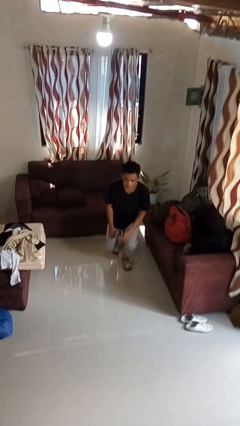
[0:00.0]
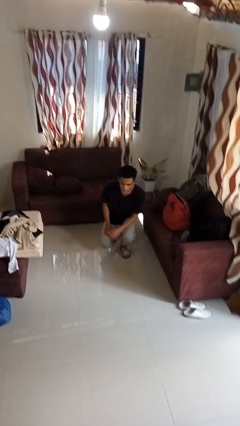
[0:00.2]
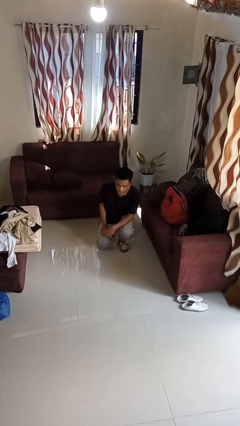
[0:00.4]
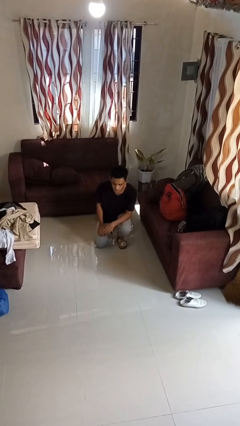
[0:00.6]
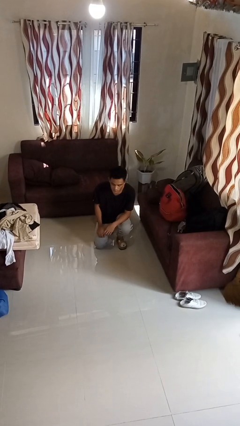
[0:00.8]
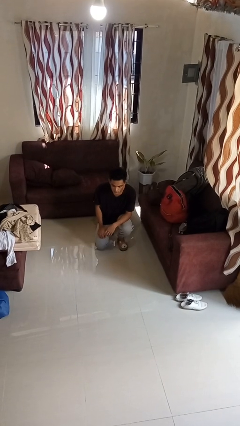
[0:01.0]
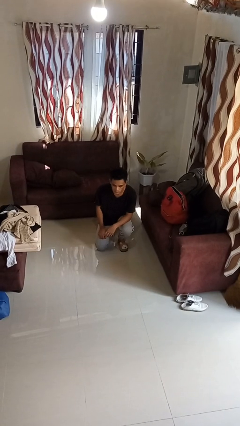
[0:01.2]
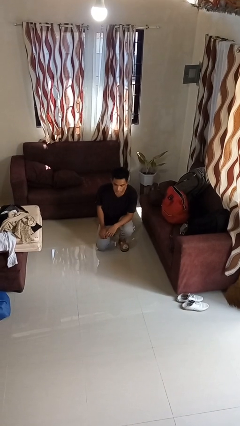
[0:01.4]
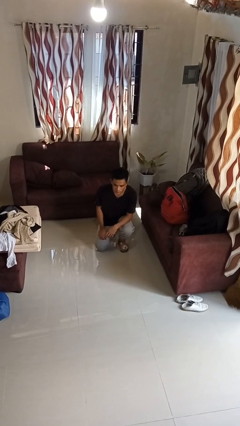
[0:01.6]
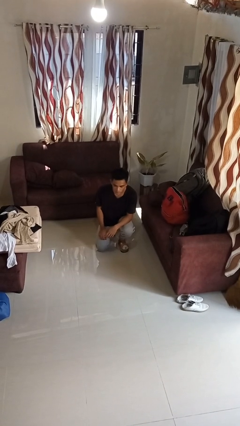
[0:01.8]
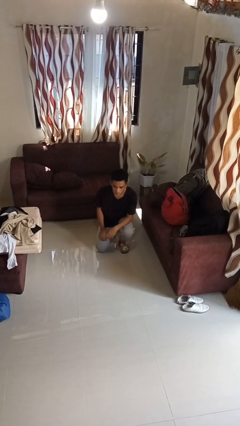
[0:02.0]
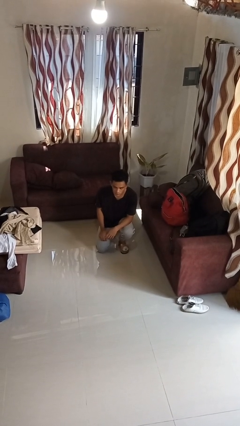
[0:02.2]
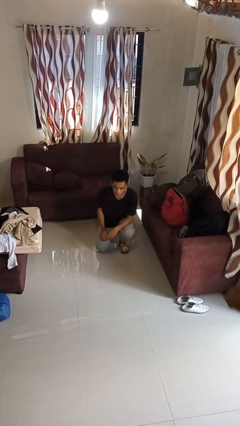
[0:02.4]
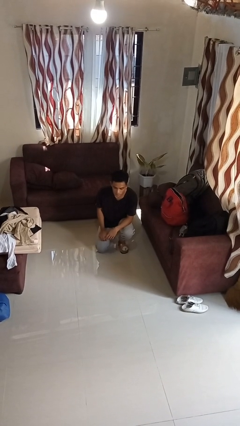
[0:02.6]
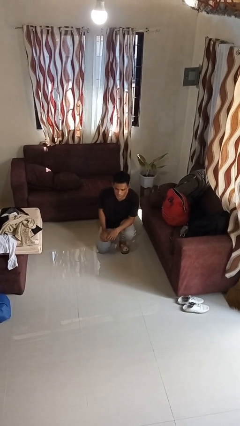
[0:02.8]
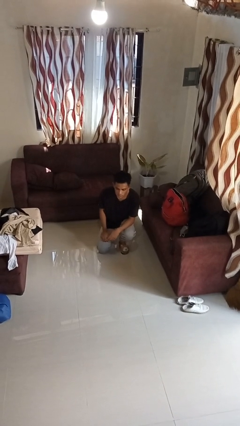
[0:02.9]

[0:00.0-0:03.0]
person kneels

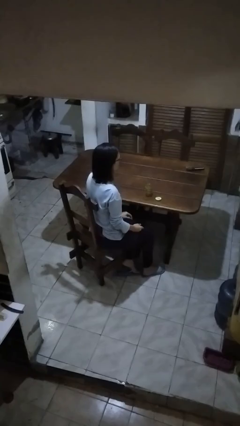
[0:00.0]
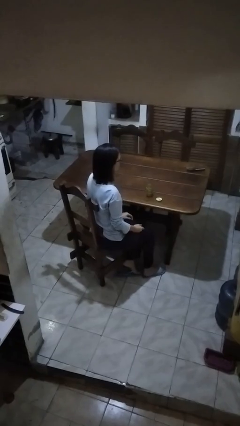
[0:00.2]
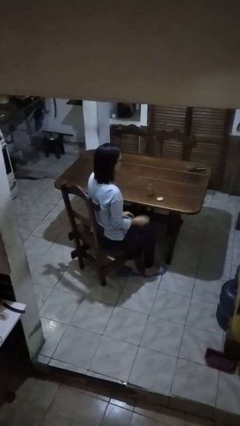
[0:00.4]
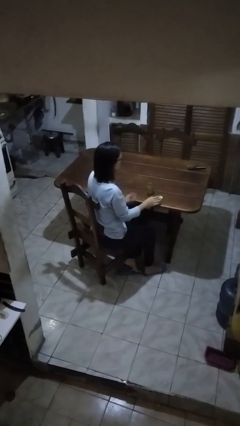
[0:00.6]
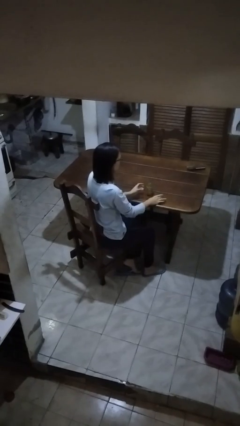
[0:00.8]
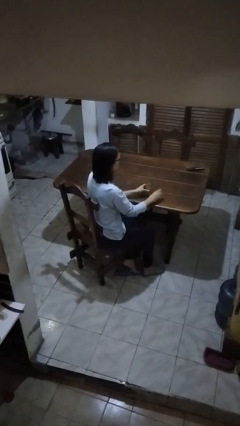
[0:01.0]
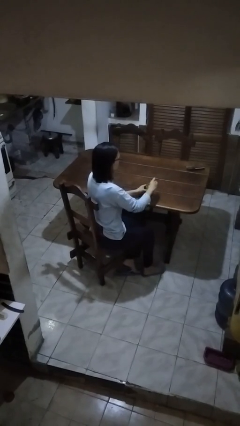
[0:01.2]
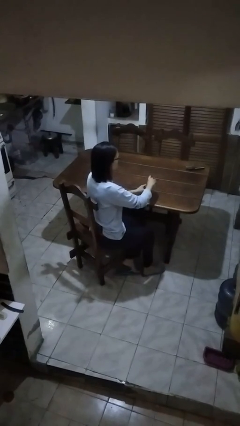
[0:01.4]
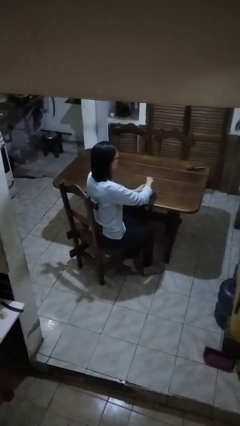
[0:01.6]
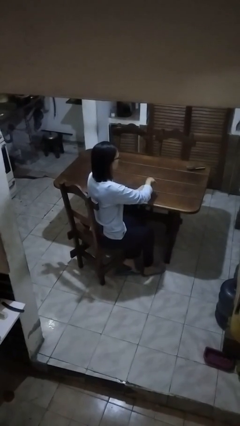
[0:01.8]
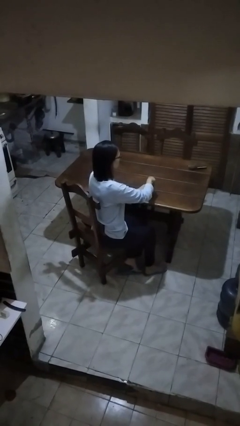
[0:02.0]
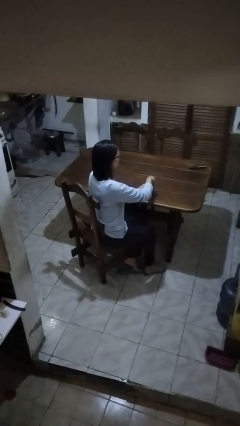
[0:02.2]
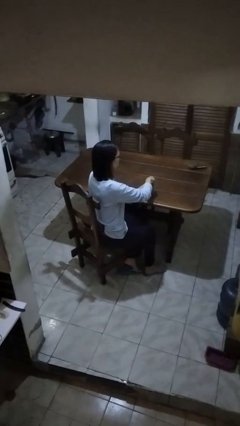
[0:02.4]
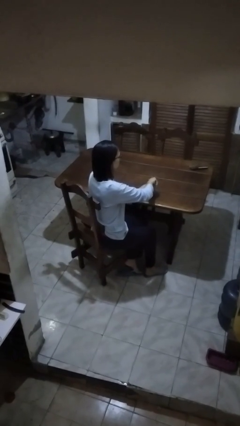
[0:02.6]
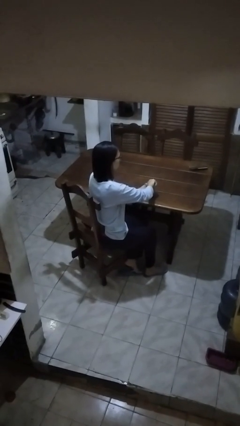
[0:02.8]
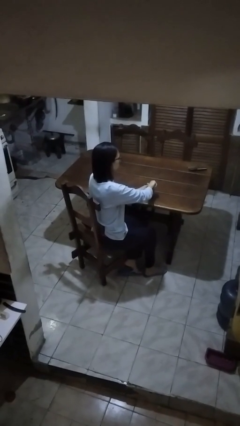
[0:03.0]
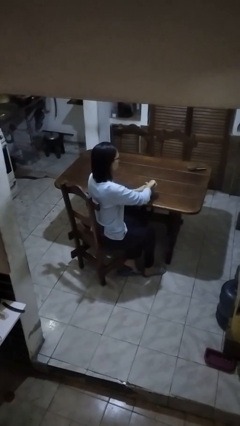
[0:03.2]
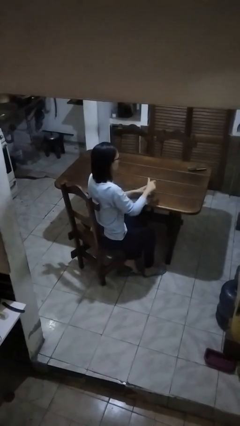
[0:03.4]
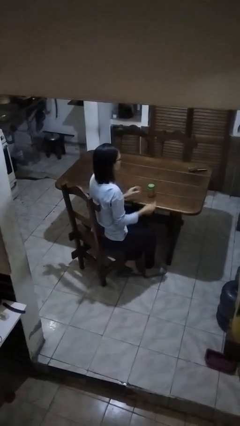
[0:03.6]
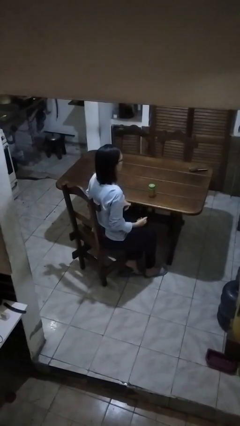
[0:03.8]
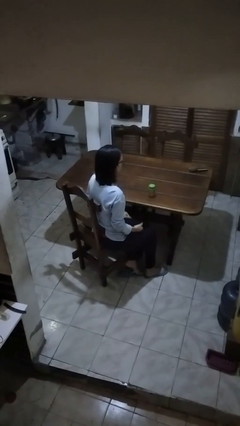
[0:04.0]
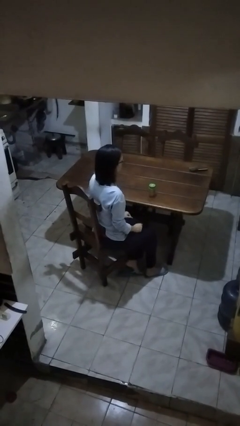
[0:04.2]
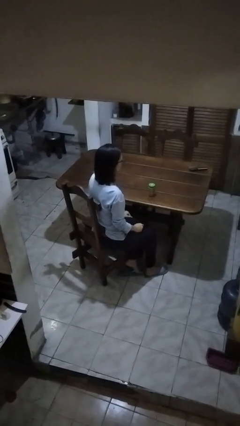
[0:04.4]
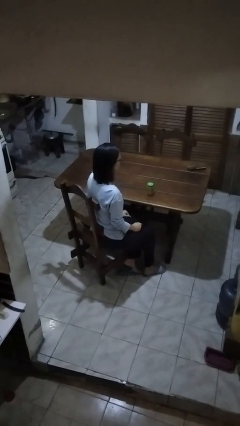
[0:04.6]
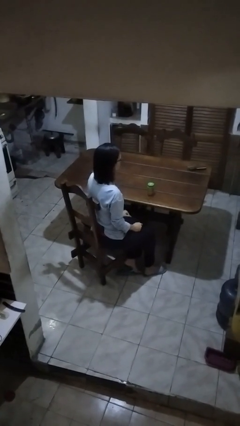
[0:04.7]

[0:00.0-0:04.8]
person closes jar

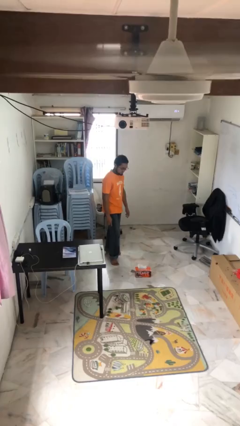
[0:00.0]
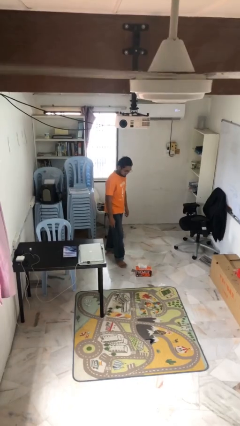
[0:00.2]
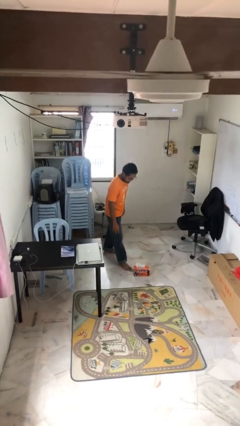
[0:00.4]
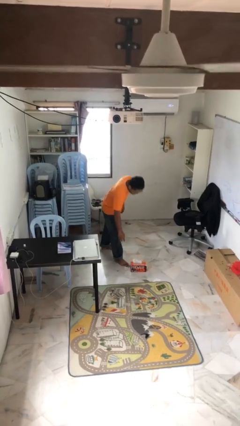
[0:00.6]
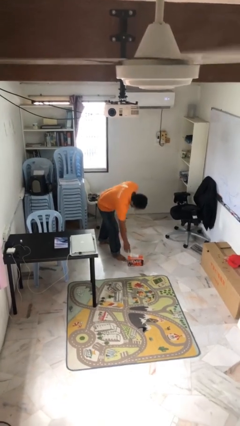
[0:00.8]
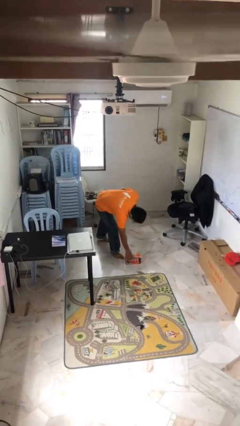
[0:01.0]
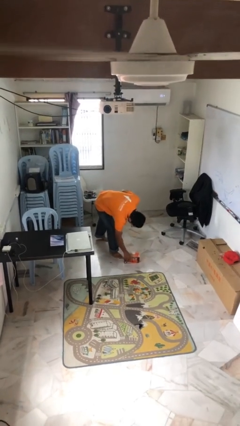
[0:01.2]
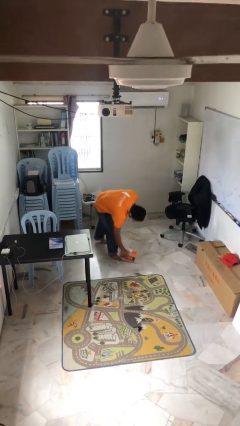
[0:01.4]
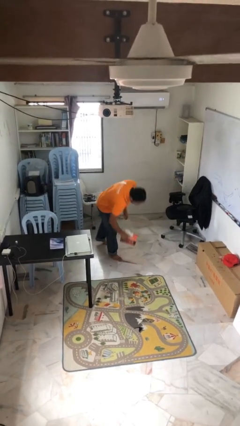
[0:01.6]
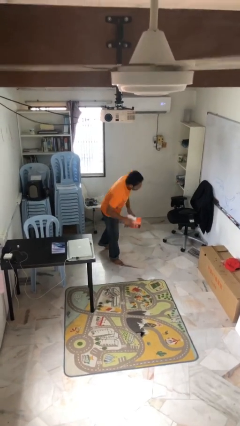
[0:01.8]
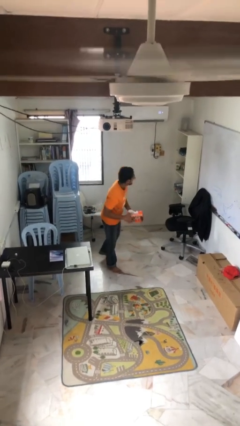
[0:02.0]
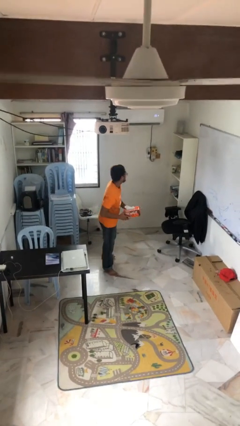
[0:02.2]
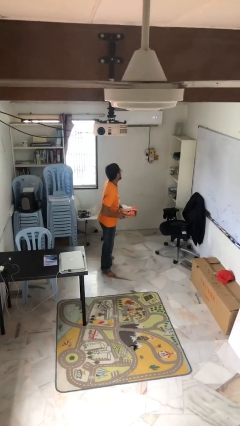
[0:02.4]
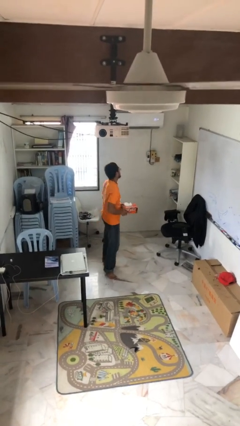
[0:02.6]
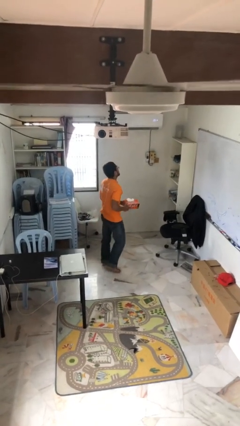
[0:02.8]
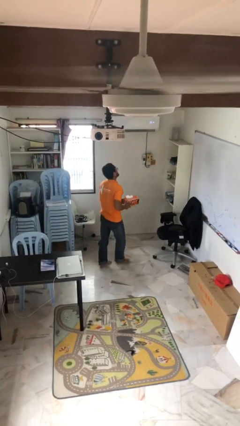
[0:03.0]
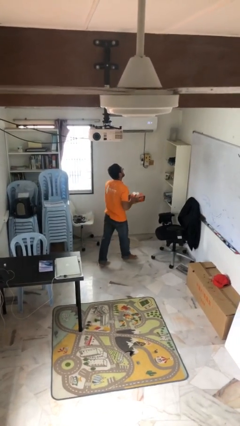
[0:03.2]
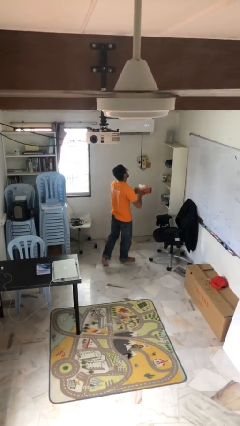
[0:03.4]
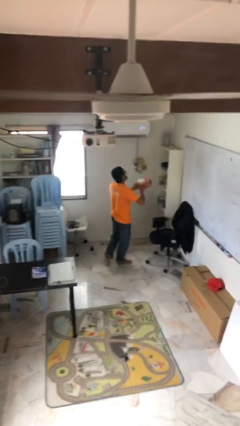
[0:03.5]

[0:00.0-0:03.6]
person picks up object from floor

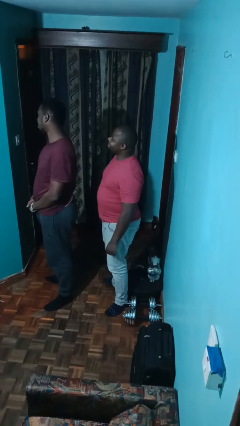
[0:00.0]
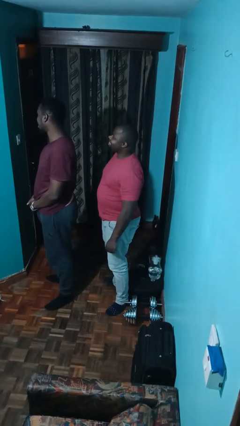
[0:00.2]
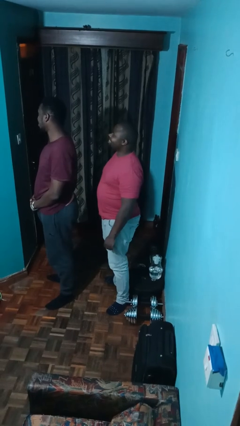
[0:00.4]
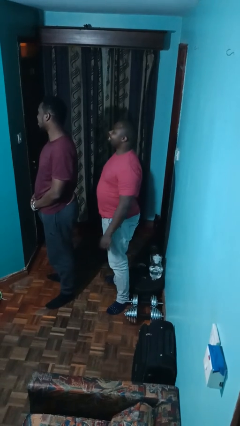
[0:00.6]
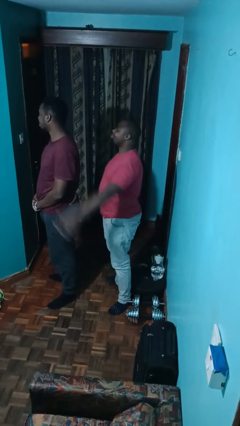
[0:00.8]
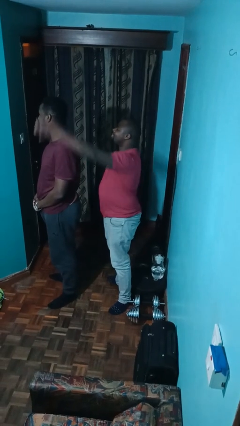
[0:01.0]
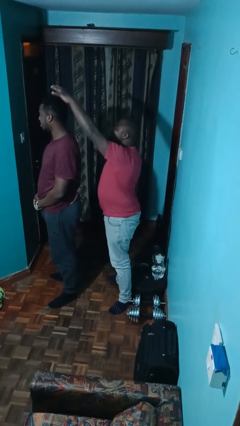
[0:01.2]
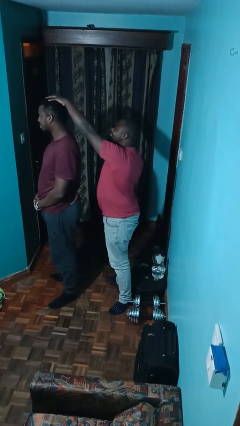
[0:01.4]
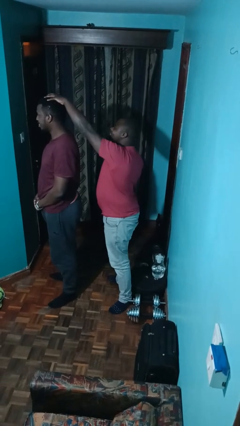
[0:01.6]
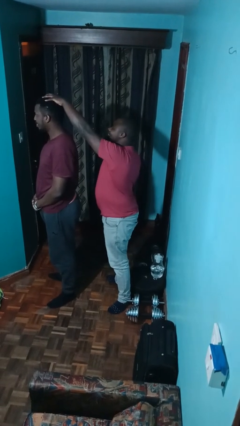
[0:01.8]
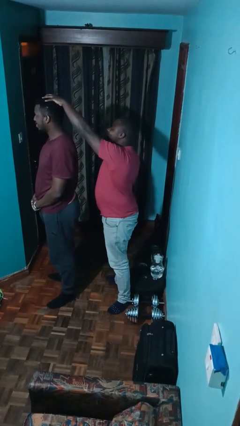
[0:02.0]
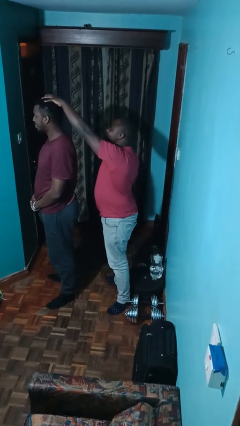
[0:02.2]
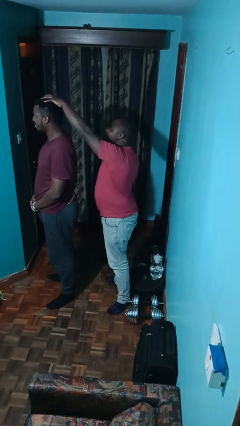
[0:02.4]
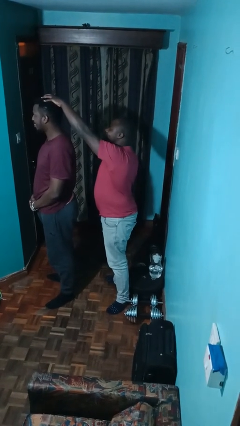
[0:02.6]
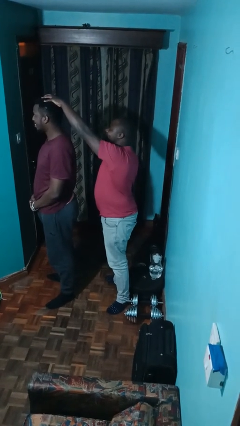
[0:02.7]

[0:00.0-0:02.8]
person grabs person by hair

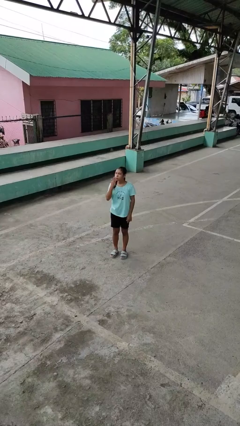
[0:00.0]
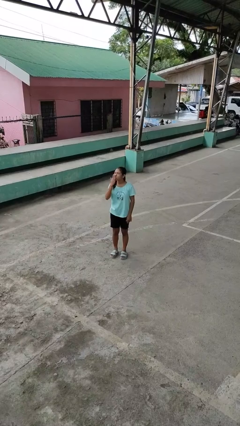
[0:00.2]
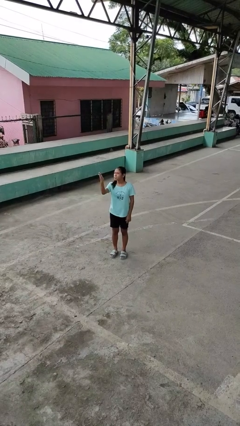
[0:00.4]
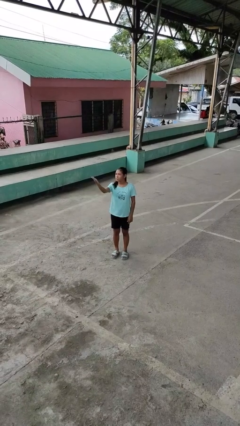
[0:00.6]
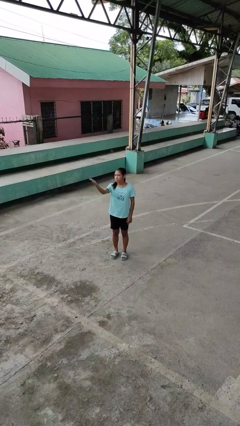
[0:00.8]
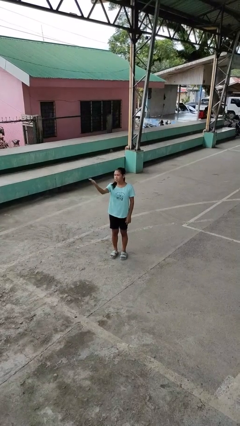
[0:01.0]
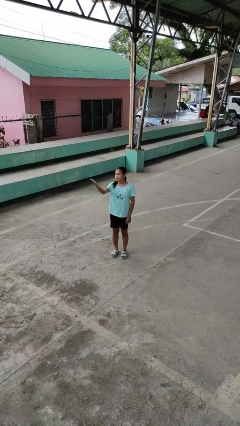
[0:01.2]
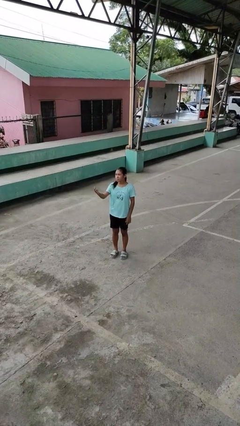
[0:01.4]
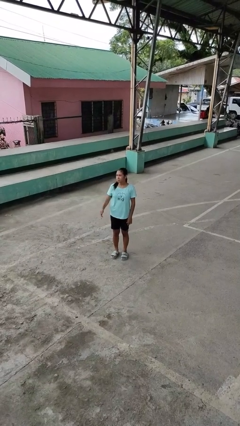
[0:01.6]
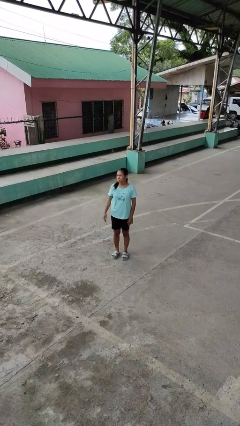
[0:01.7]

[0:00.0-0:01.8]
person gestures blow kiss

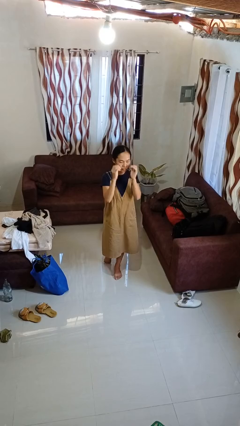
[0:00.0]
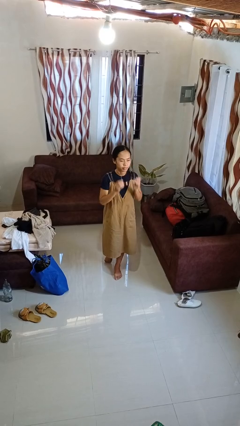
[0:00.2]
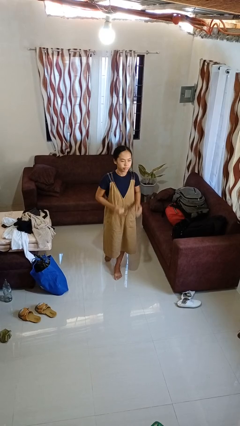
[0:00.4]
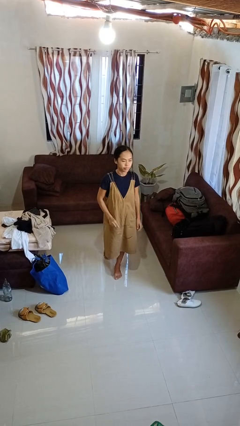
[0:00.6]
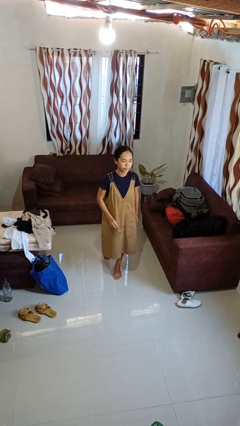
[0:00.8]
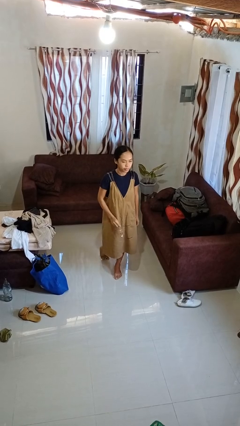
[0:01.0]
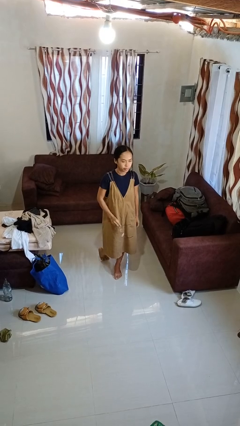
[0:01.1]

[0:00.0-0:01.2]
person takes off glasses
